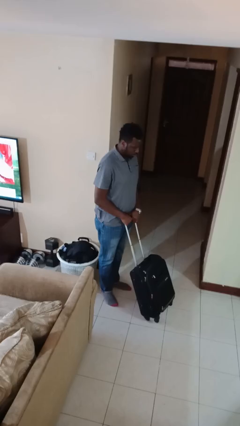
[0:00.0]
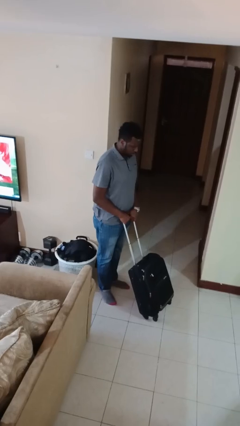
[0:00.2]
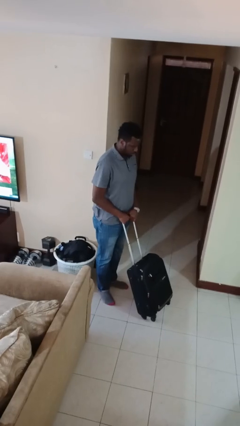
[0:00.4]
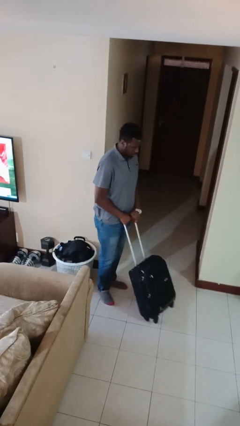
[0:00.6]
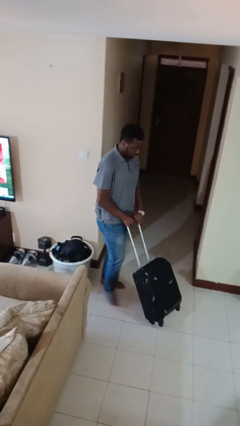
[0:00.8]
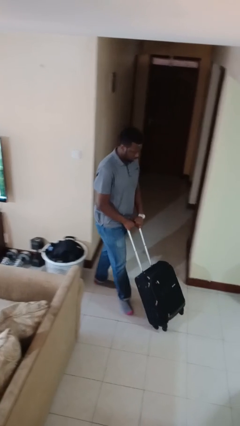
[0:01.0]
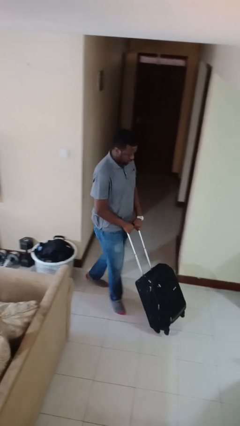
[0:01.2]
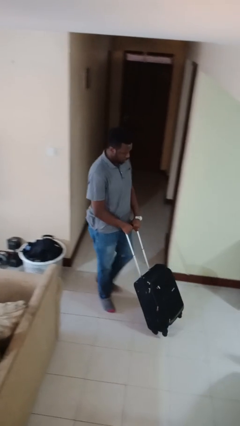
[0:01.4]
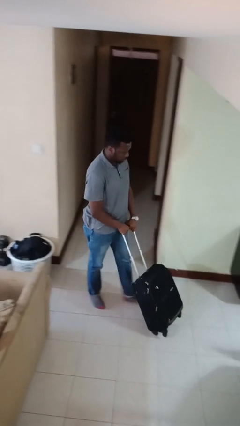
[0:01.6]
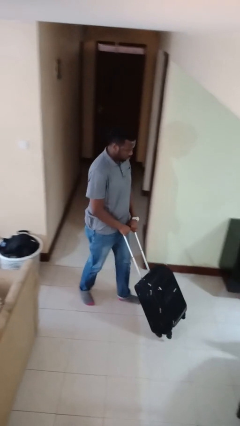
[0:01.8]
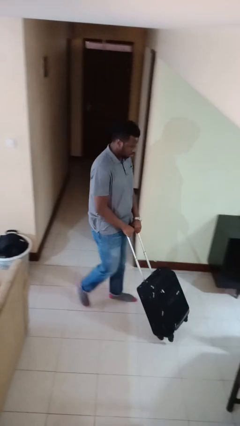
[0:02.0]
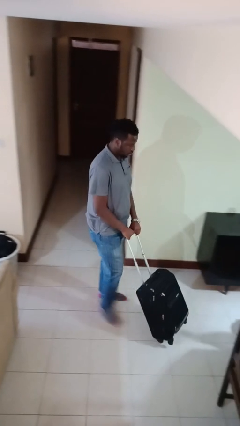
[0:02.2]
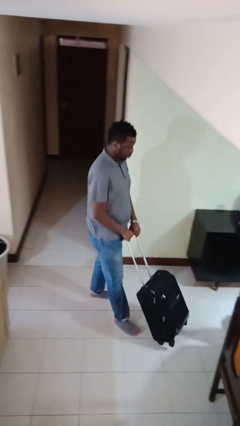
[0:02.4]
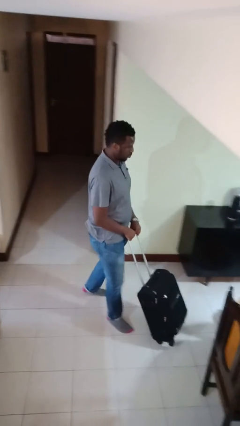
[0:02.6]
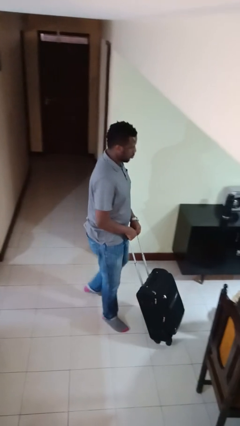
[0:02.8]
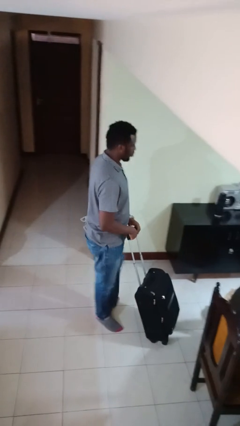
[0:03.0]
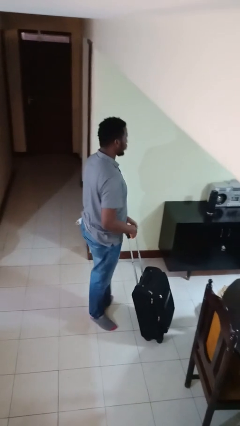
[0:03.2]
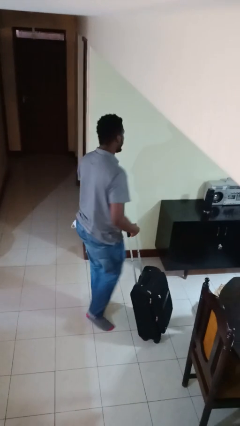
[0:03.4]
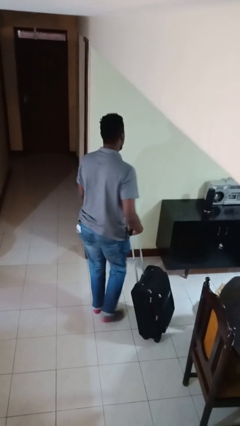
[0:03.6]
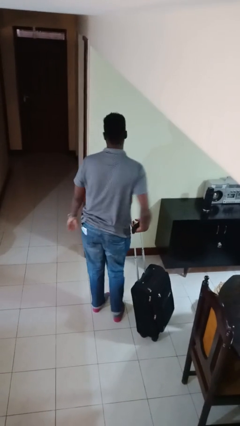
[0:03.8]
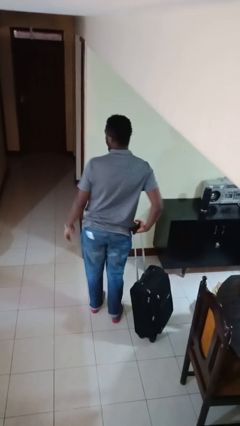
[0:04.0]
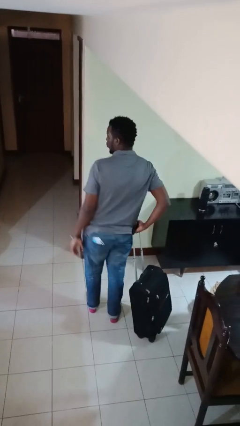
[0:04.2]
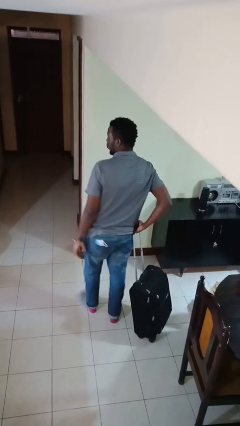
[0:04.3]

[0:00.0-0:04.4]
person pushes wheeled cart

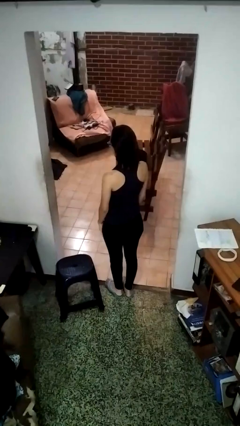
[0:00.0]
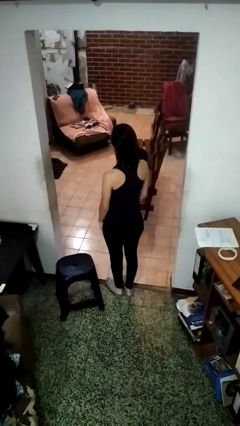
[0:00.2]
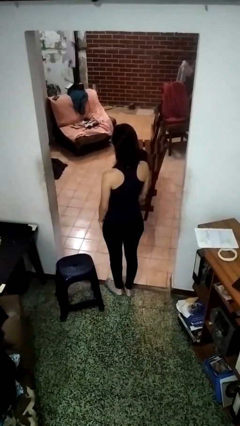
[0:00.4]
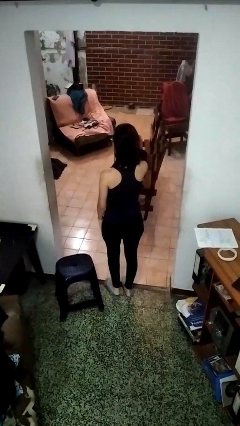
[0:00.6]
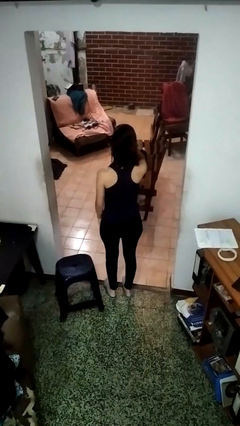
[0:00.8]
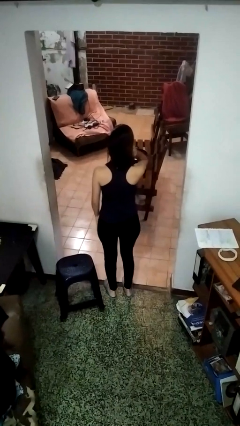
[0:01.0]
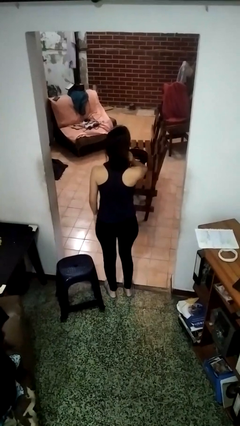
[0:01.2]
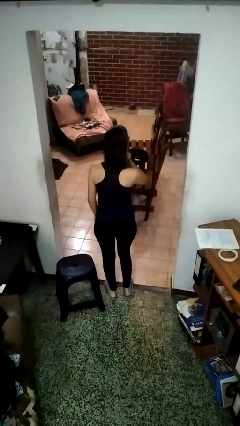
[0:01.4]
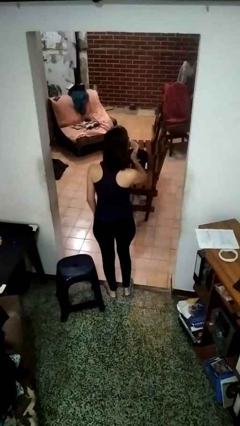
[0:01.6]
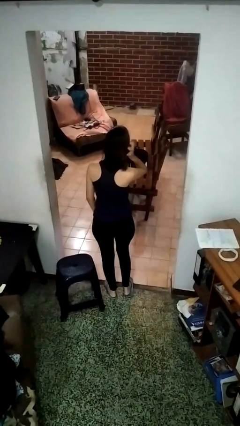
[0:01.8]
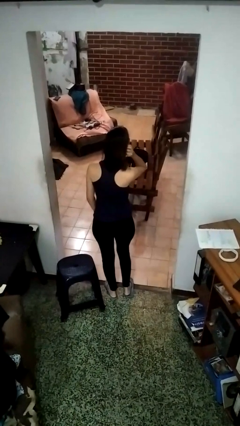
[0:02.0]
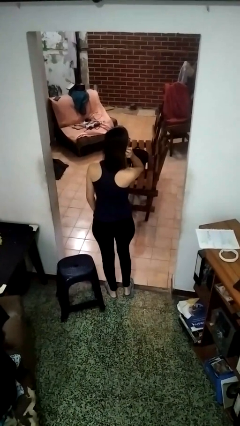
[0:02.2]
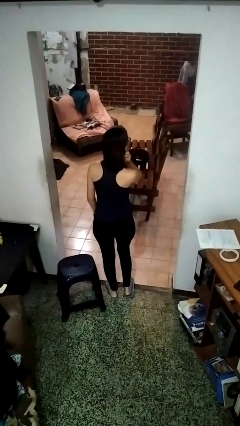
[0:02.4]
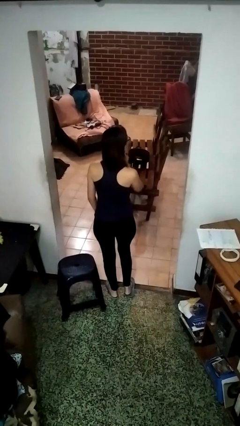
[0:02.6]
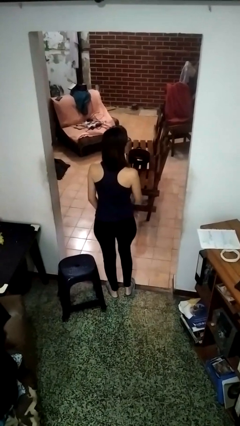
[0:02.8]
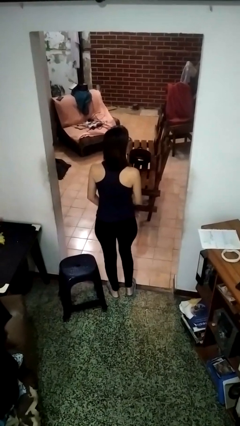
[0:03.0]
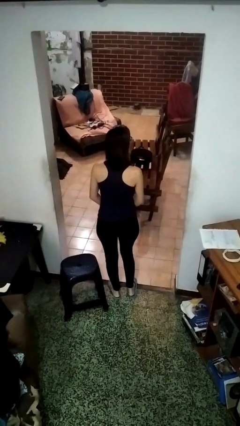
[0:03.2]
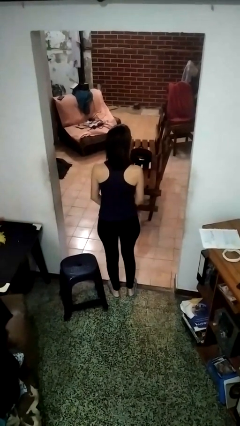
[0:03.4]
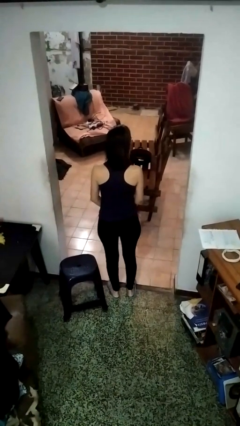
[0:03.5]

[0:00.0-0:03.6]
person strokes hair

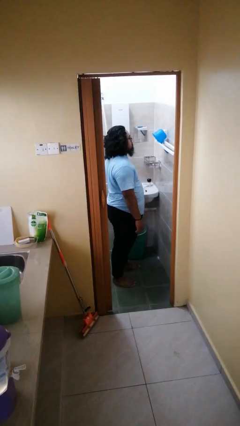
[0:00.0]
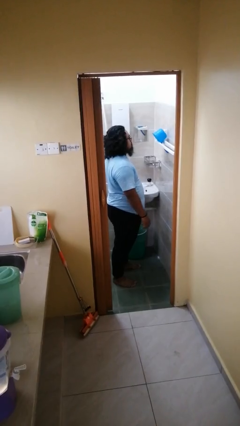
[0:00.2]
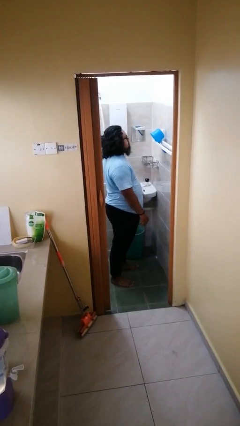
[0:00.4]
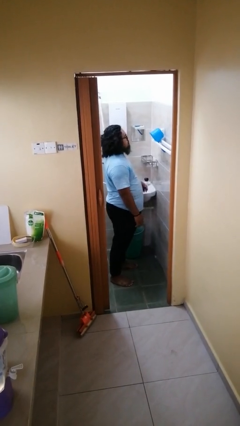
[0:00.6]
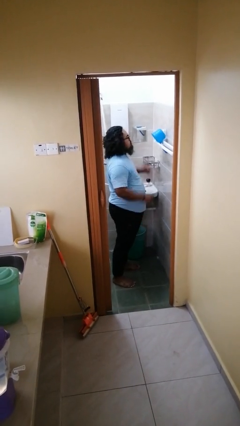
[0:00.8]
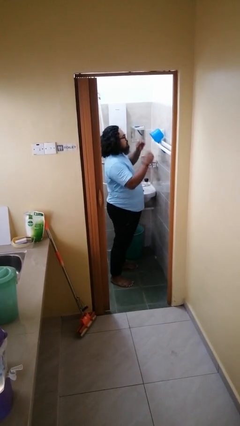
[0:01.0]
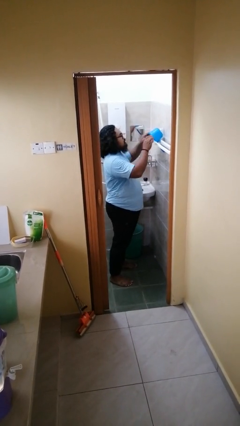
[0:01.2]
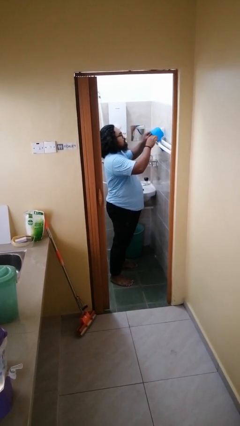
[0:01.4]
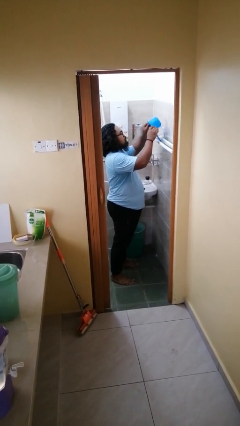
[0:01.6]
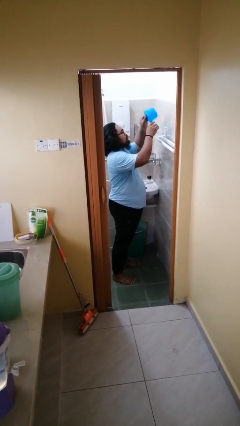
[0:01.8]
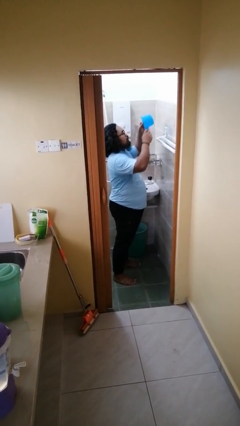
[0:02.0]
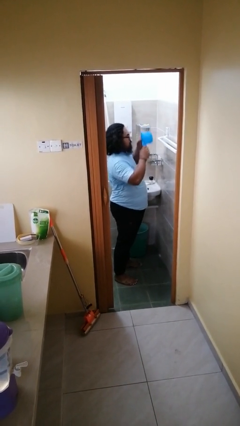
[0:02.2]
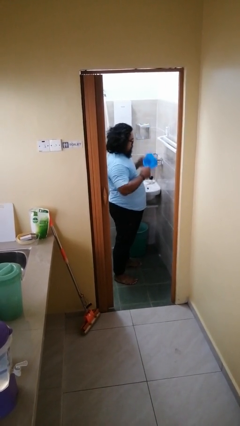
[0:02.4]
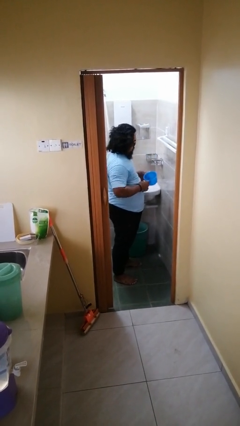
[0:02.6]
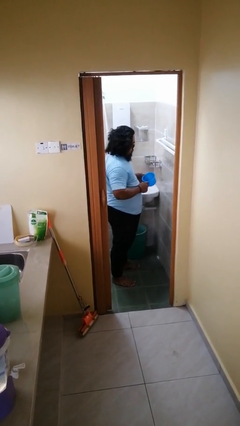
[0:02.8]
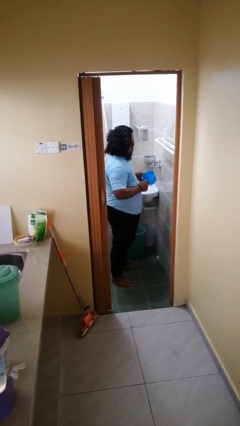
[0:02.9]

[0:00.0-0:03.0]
person picks up object from countertop

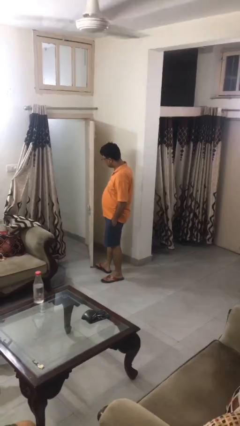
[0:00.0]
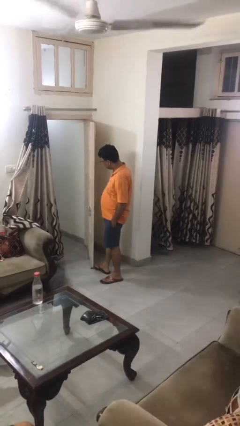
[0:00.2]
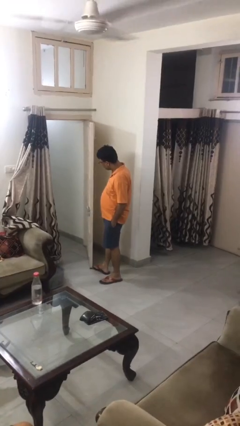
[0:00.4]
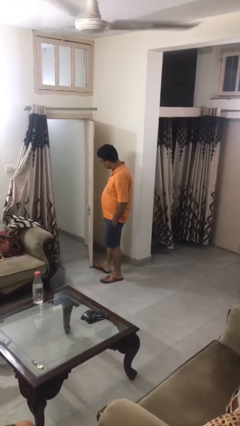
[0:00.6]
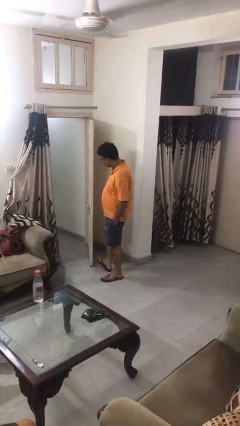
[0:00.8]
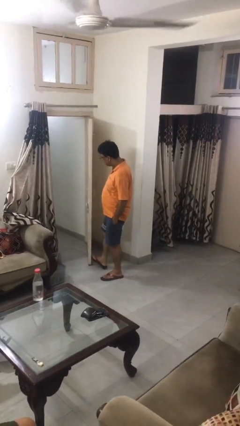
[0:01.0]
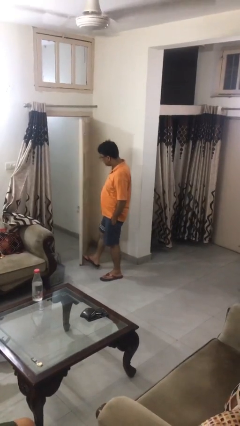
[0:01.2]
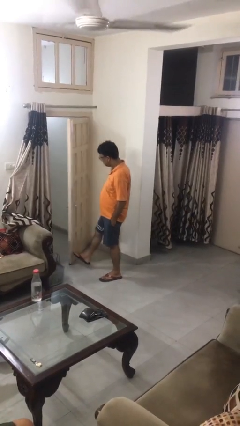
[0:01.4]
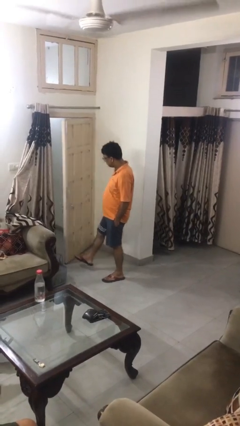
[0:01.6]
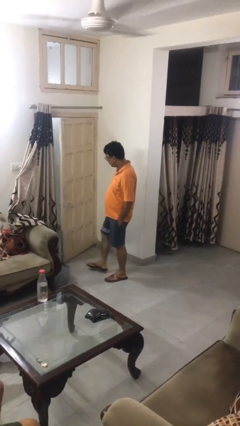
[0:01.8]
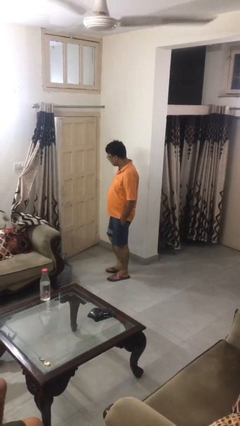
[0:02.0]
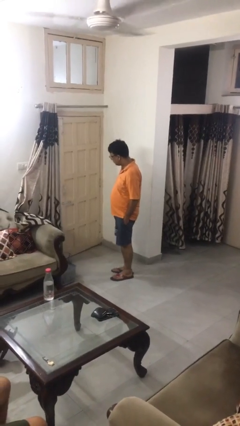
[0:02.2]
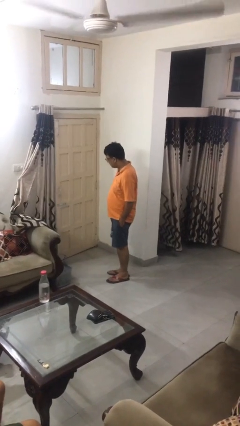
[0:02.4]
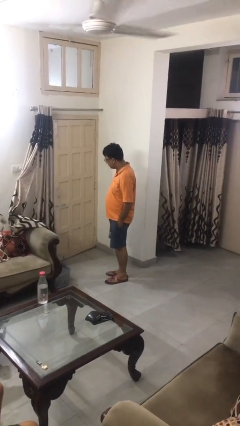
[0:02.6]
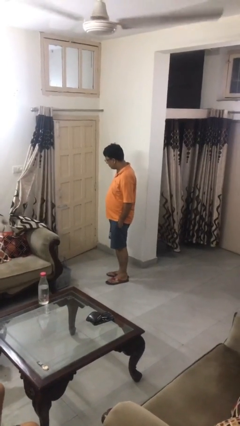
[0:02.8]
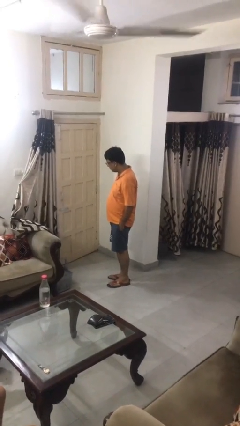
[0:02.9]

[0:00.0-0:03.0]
person closes door with foot

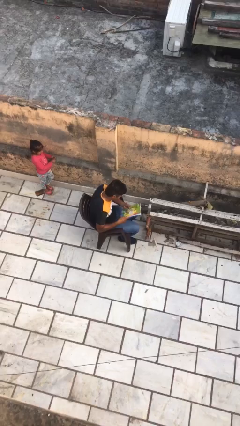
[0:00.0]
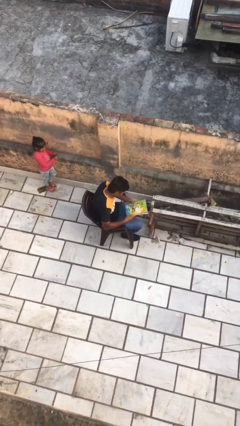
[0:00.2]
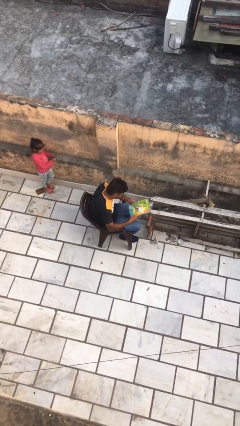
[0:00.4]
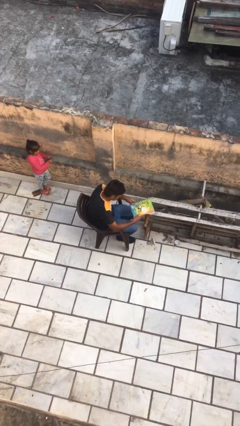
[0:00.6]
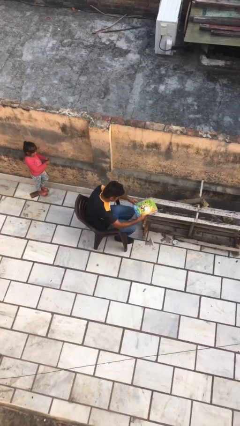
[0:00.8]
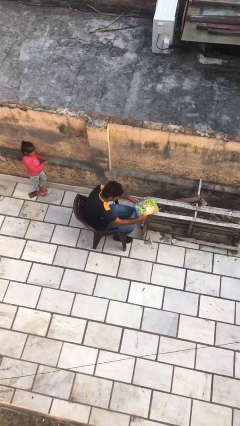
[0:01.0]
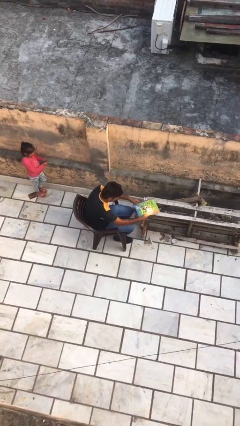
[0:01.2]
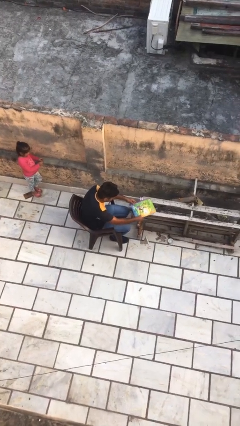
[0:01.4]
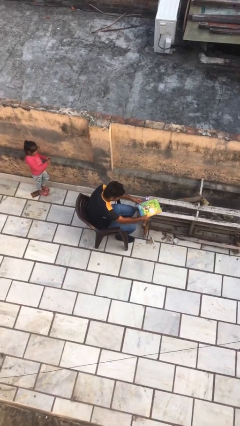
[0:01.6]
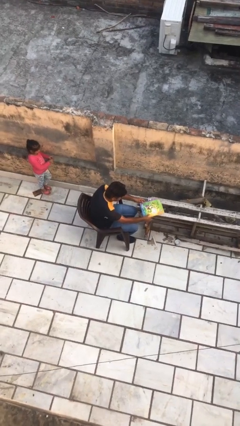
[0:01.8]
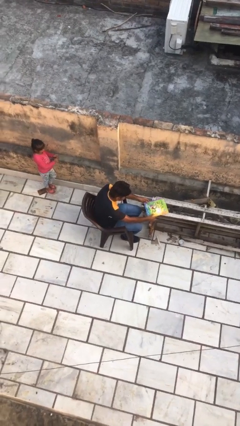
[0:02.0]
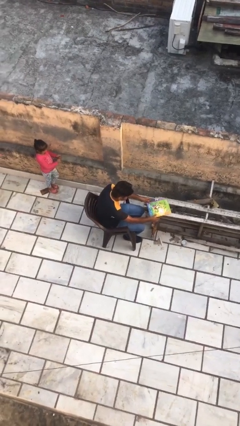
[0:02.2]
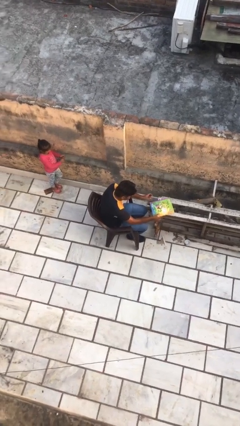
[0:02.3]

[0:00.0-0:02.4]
person puts down object on table

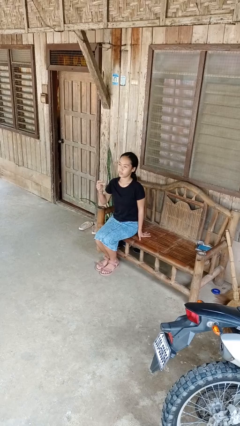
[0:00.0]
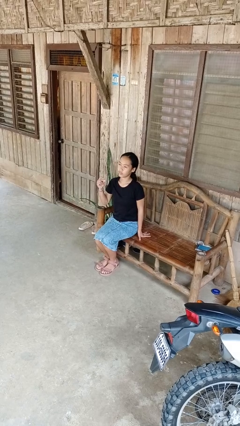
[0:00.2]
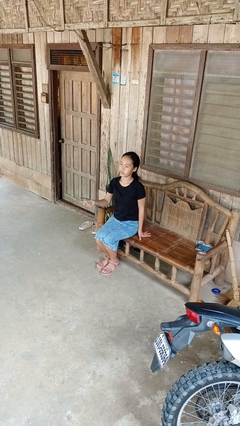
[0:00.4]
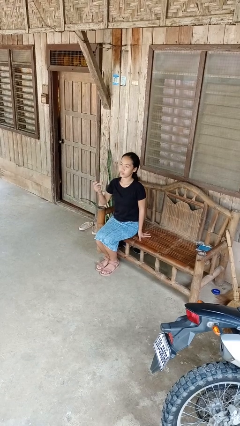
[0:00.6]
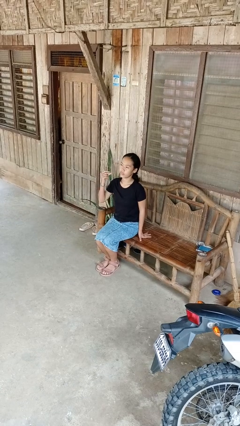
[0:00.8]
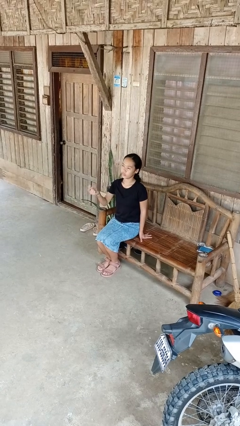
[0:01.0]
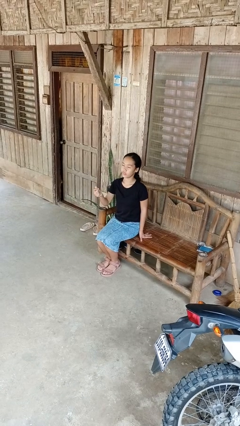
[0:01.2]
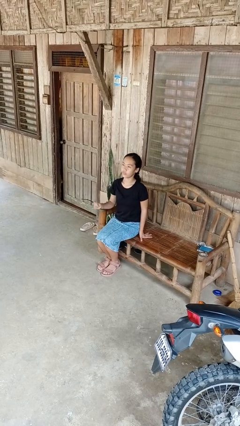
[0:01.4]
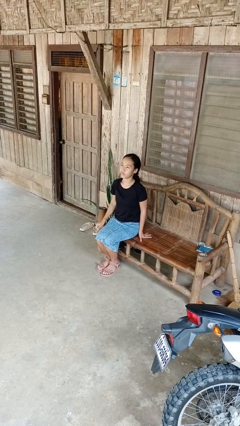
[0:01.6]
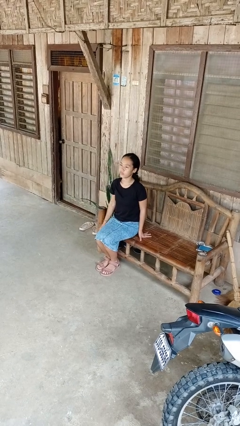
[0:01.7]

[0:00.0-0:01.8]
person snaps fingers
